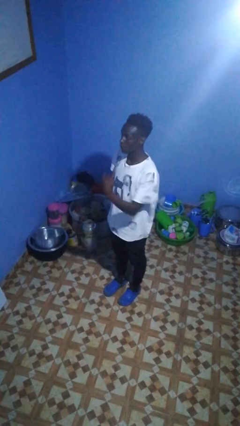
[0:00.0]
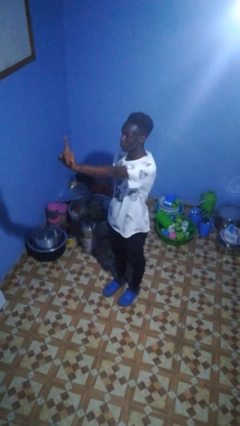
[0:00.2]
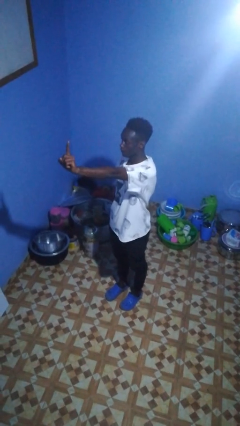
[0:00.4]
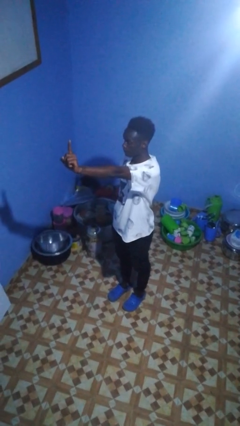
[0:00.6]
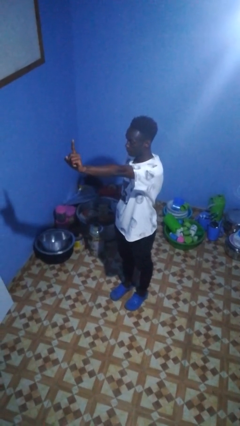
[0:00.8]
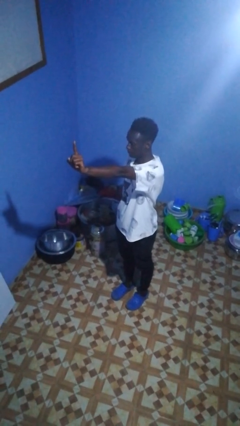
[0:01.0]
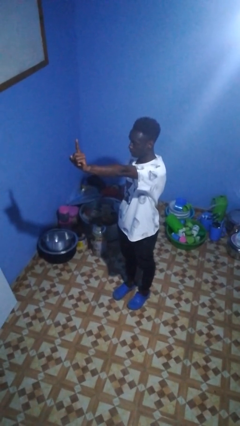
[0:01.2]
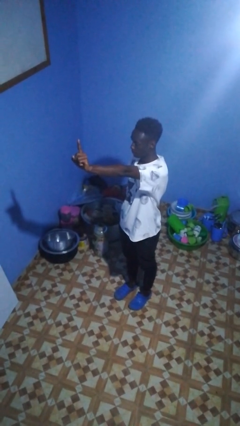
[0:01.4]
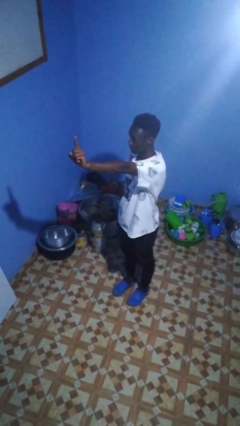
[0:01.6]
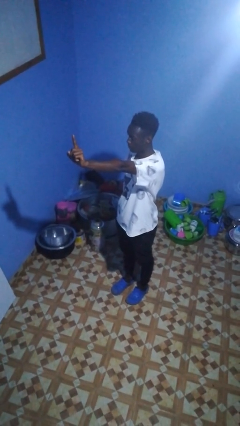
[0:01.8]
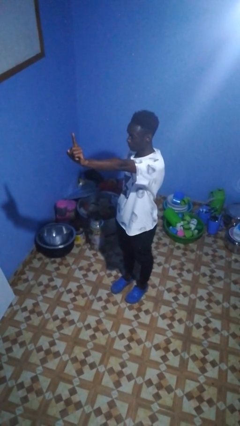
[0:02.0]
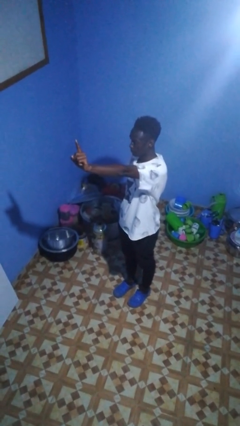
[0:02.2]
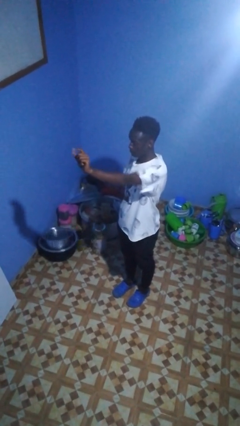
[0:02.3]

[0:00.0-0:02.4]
person gestures number one

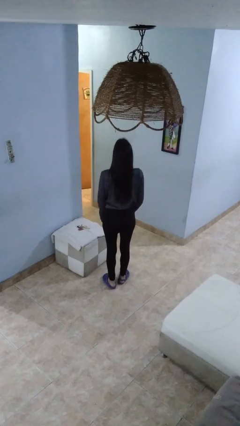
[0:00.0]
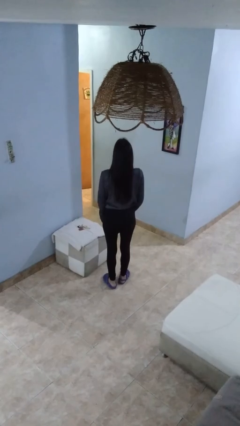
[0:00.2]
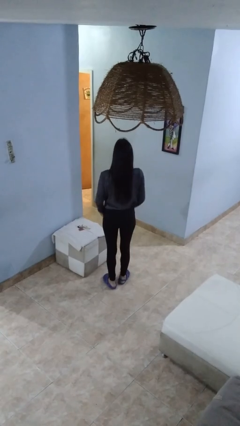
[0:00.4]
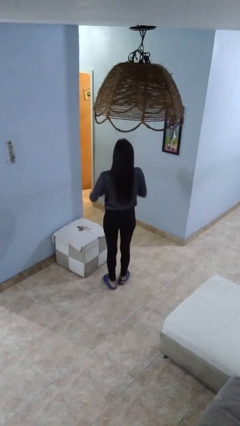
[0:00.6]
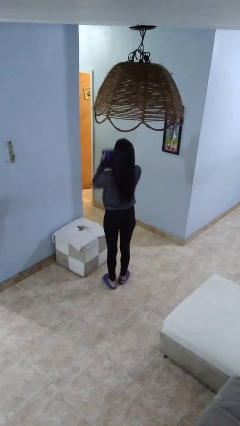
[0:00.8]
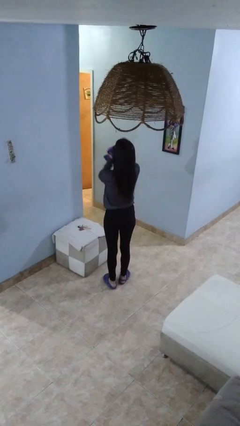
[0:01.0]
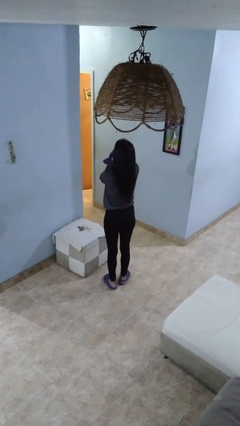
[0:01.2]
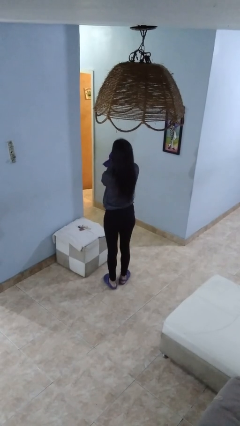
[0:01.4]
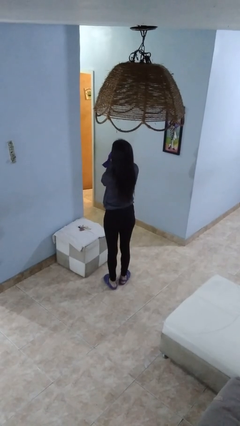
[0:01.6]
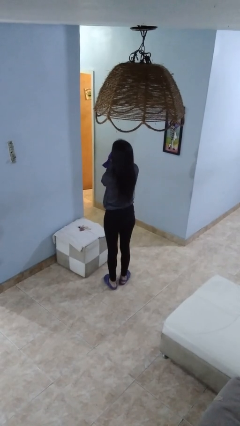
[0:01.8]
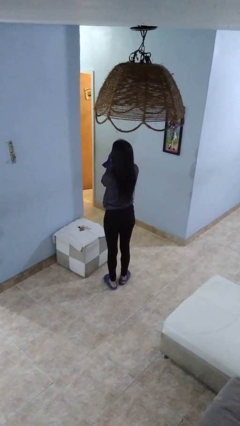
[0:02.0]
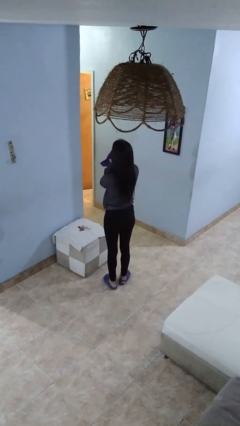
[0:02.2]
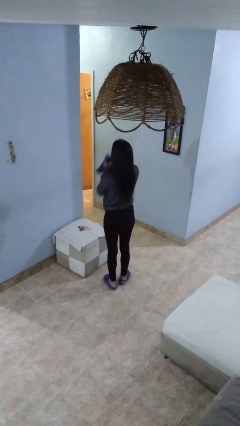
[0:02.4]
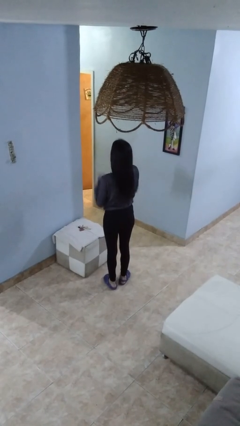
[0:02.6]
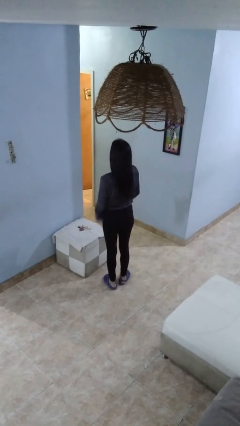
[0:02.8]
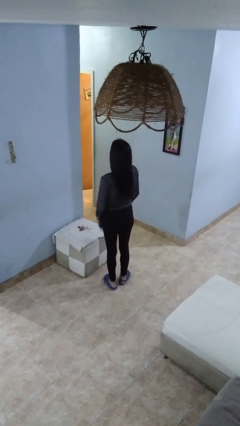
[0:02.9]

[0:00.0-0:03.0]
person blows nose

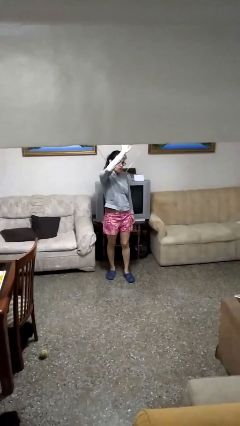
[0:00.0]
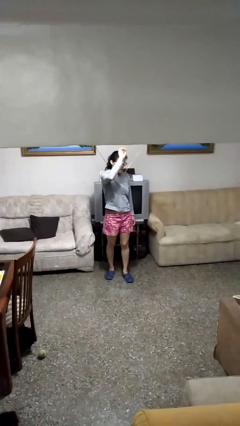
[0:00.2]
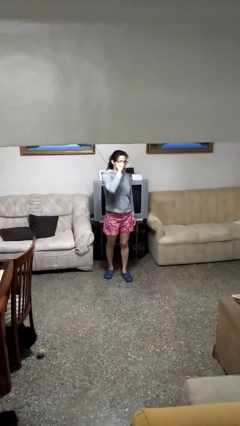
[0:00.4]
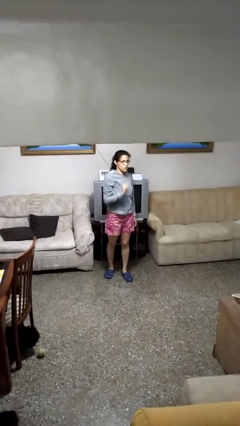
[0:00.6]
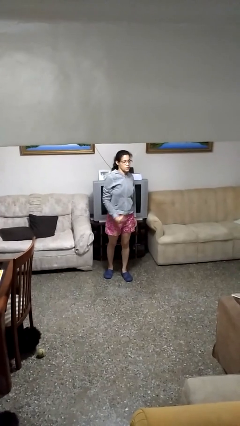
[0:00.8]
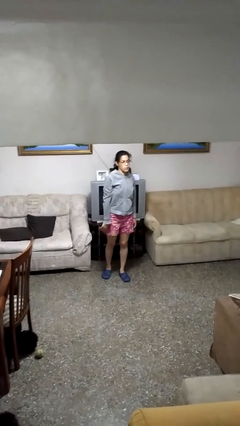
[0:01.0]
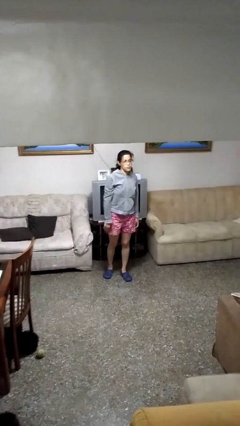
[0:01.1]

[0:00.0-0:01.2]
person gestures lower hand

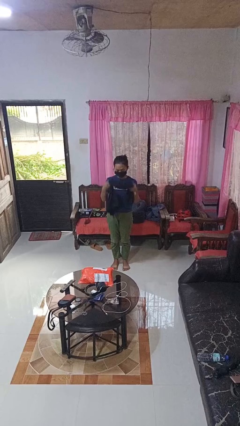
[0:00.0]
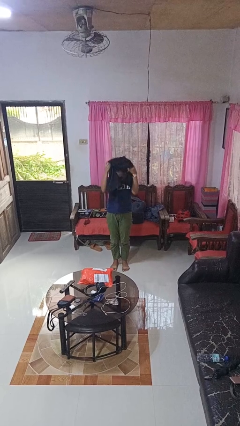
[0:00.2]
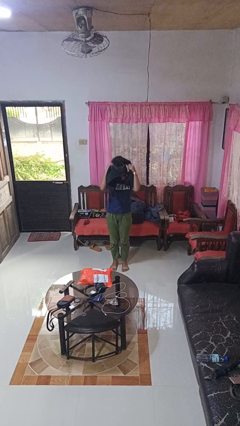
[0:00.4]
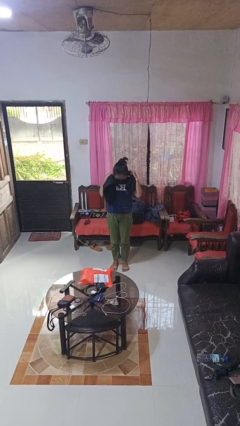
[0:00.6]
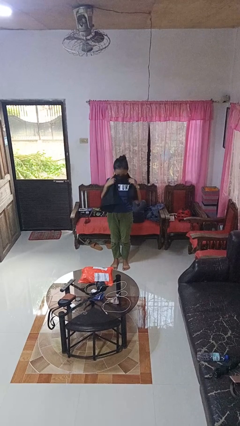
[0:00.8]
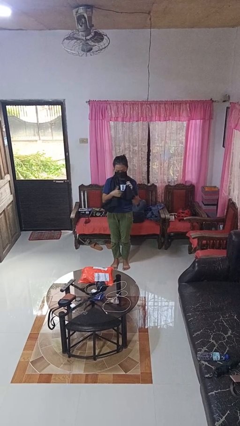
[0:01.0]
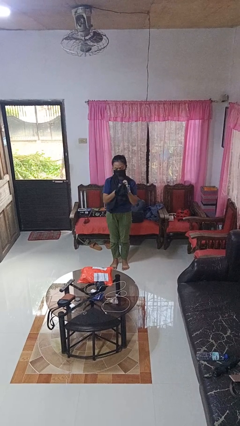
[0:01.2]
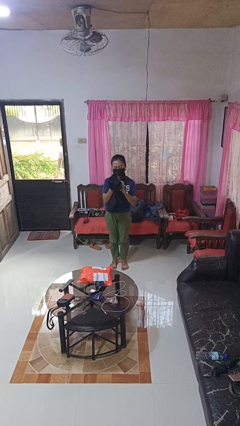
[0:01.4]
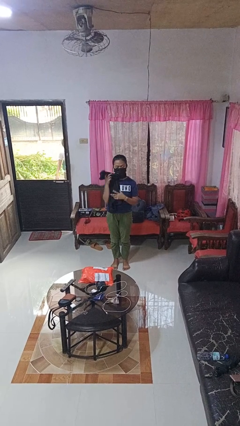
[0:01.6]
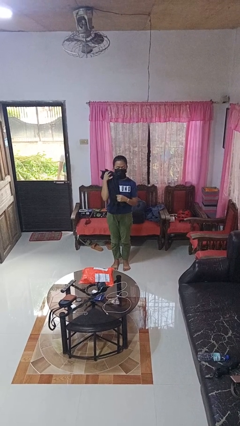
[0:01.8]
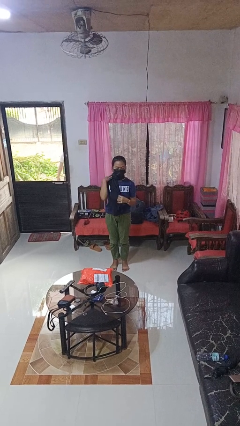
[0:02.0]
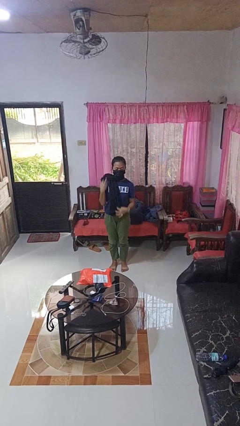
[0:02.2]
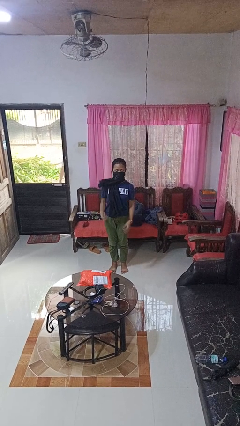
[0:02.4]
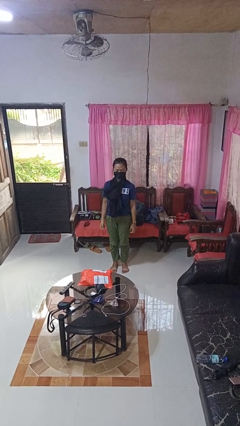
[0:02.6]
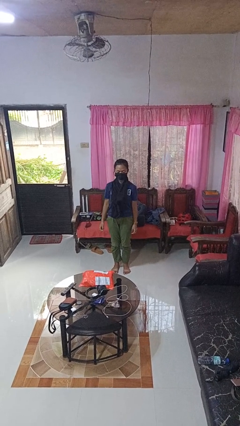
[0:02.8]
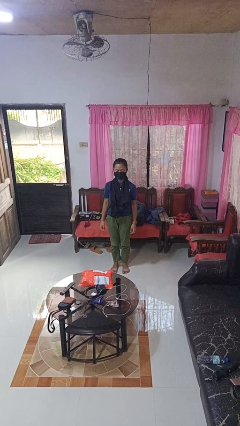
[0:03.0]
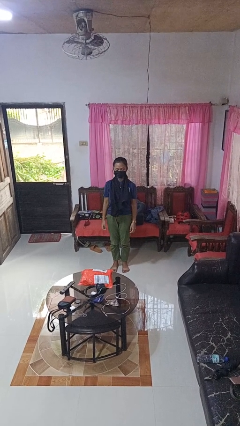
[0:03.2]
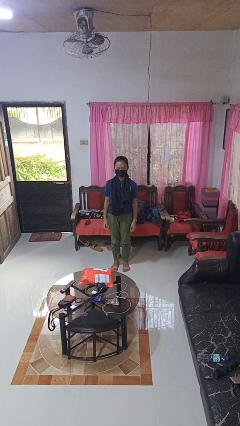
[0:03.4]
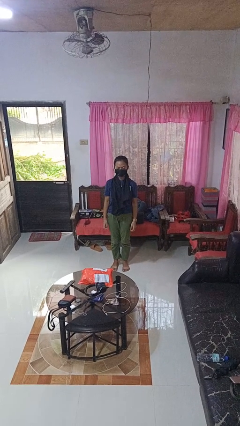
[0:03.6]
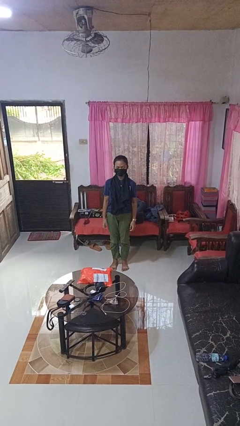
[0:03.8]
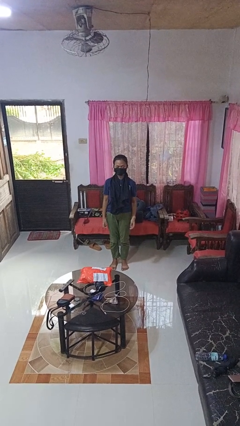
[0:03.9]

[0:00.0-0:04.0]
person puts on scarf

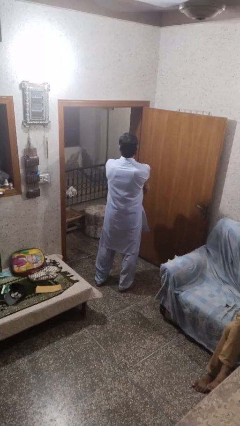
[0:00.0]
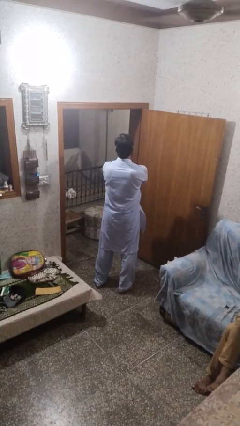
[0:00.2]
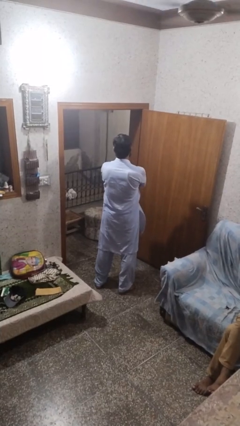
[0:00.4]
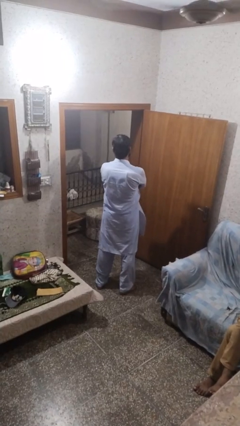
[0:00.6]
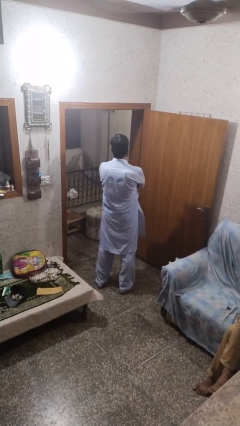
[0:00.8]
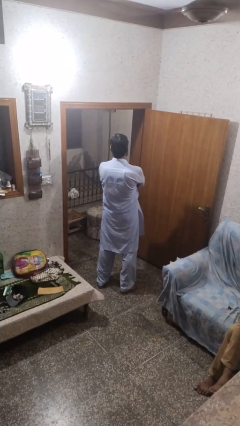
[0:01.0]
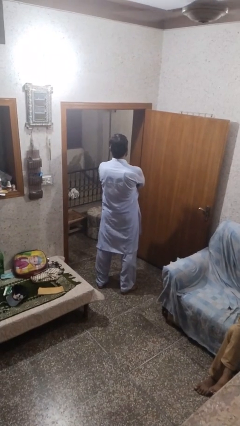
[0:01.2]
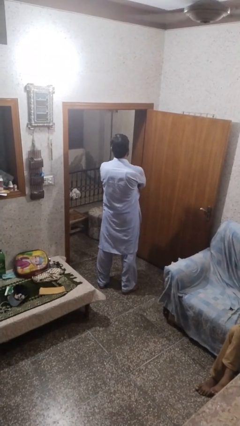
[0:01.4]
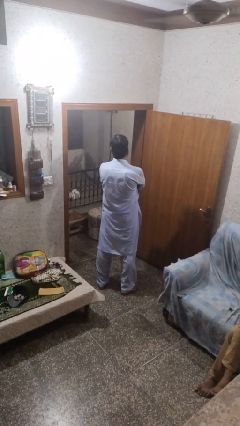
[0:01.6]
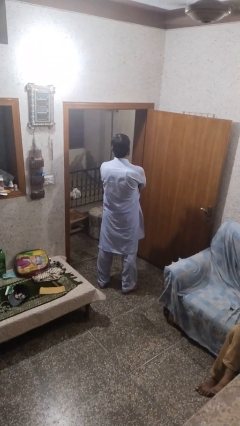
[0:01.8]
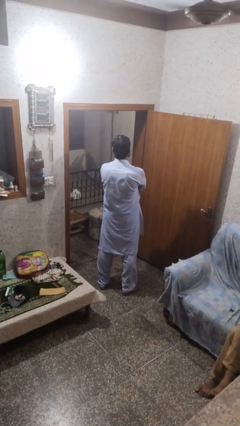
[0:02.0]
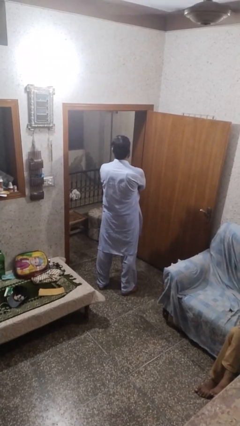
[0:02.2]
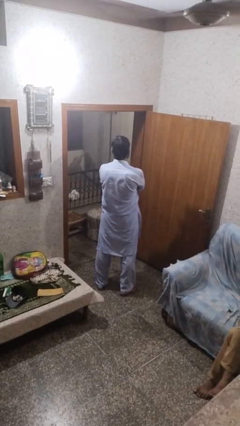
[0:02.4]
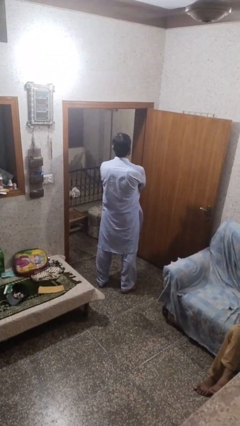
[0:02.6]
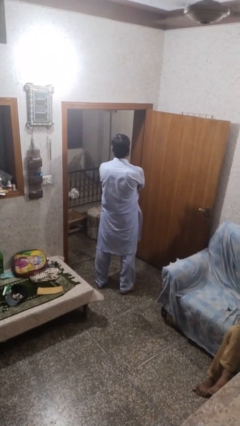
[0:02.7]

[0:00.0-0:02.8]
person crosses arms

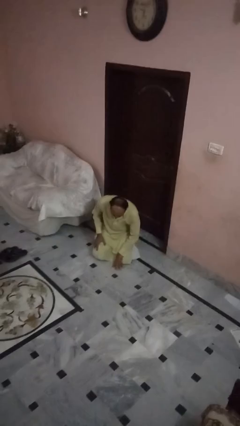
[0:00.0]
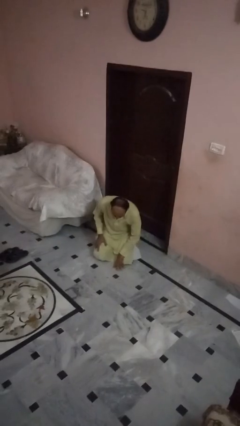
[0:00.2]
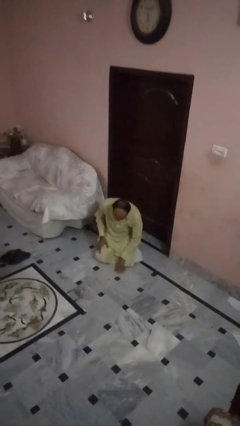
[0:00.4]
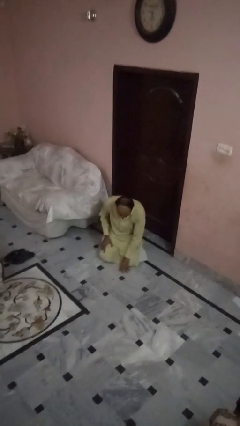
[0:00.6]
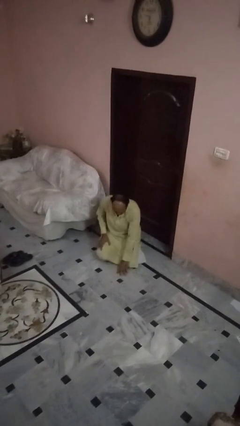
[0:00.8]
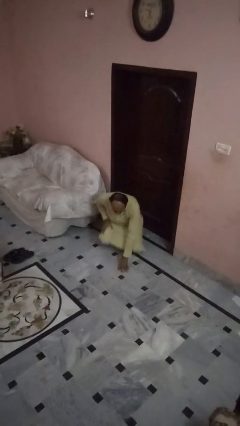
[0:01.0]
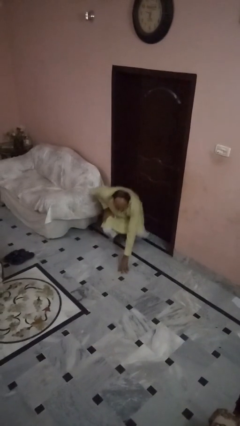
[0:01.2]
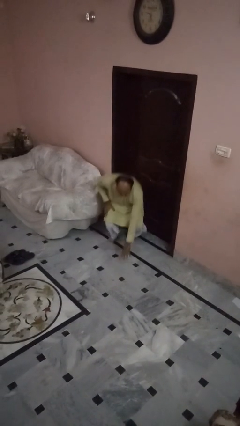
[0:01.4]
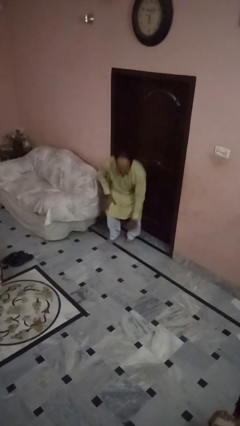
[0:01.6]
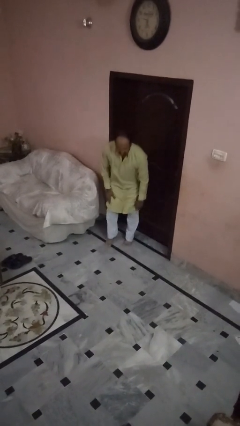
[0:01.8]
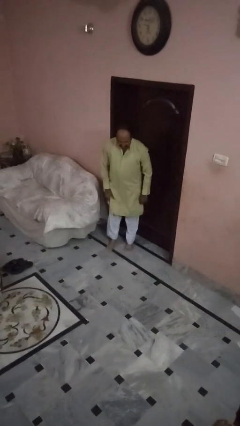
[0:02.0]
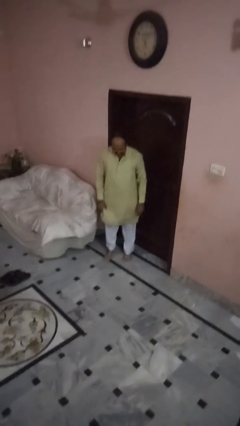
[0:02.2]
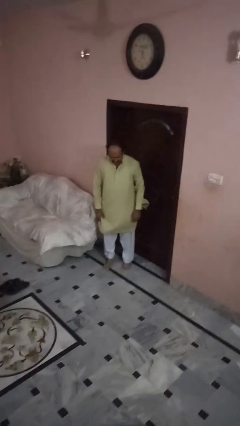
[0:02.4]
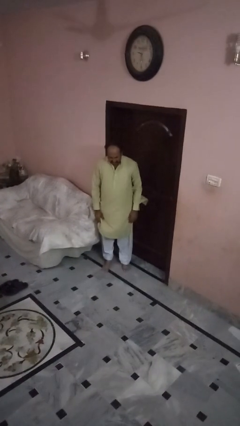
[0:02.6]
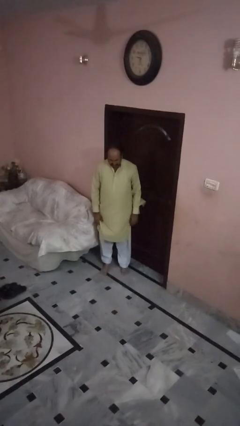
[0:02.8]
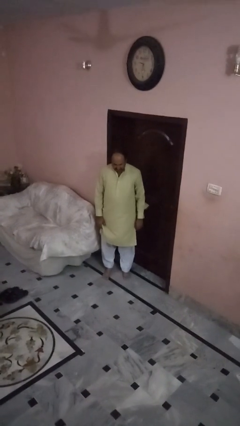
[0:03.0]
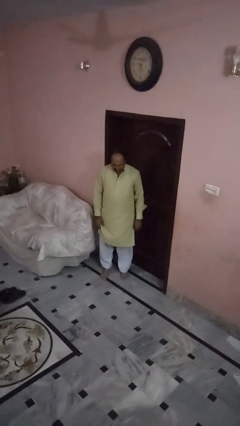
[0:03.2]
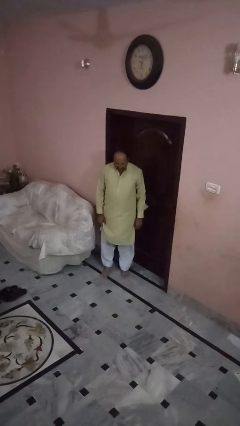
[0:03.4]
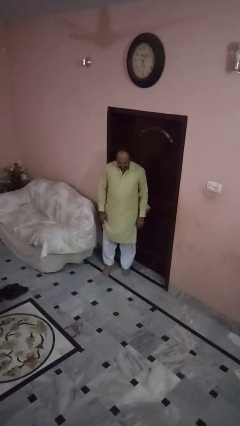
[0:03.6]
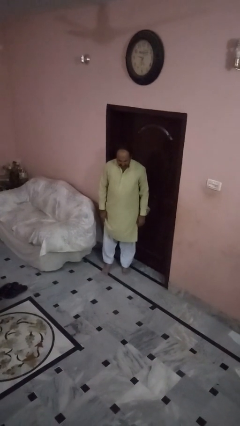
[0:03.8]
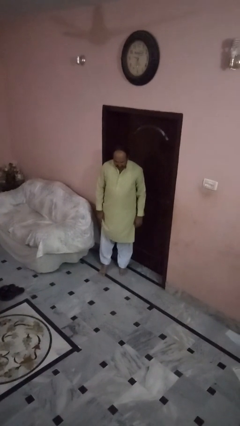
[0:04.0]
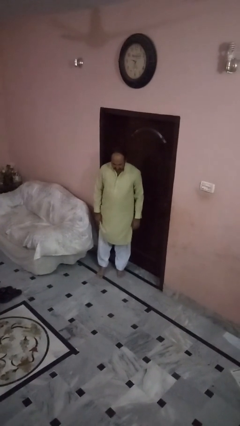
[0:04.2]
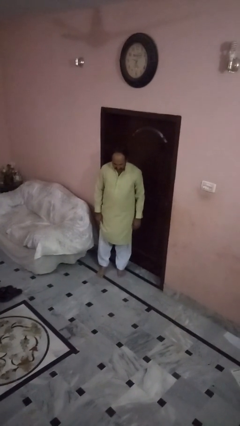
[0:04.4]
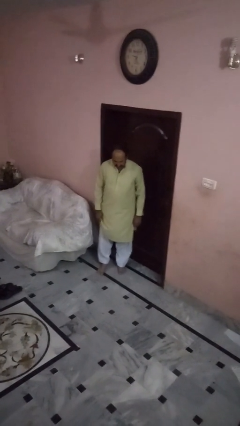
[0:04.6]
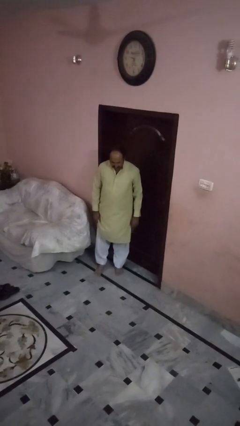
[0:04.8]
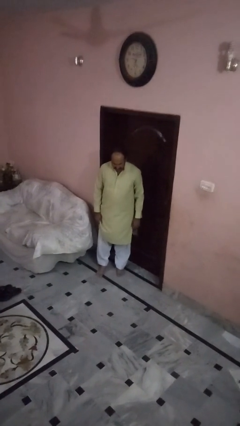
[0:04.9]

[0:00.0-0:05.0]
person stands up from floor
